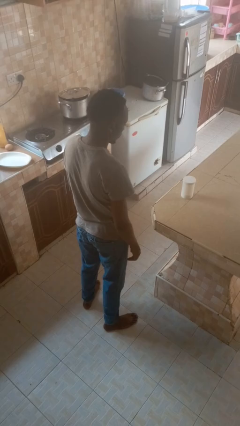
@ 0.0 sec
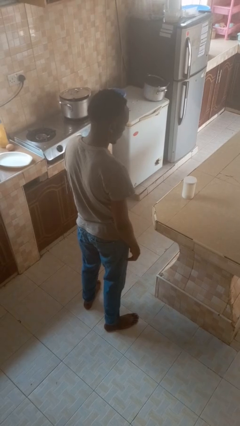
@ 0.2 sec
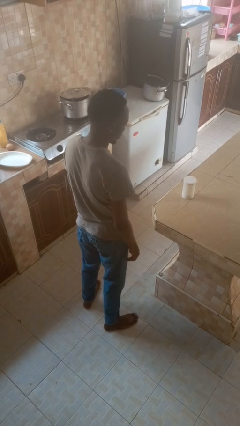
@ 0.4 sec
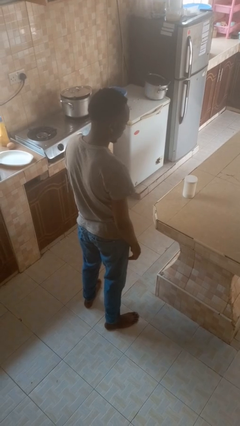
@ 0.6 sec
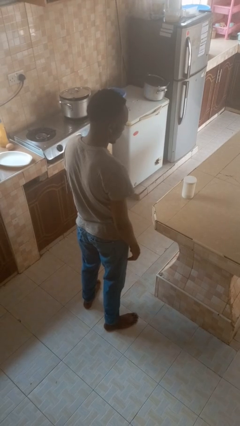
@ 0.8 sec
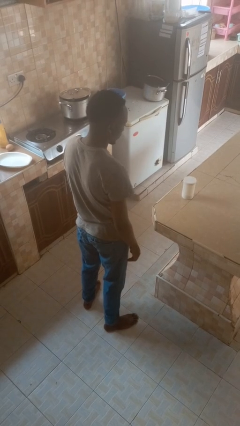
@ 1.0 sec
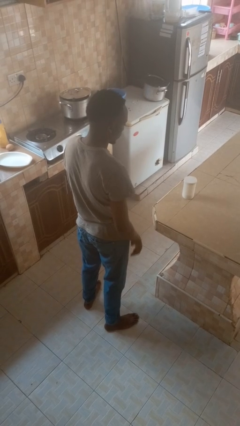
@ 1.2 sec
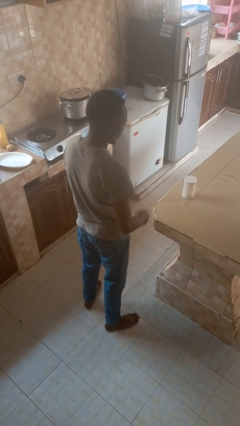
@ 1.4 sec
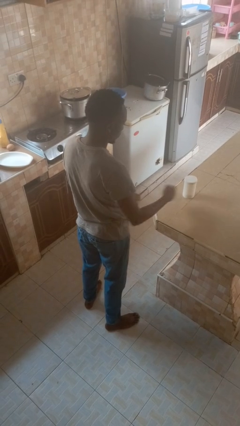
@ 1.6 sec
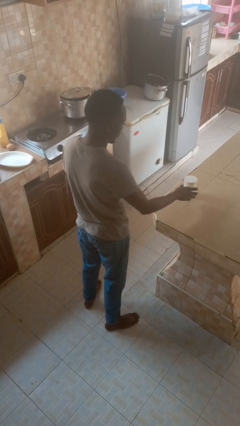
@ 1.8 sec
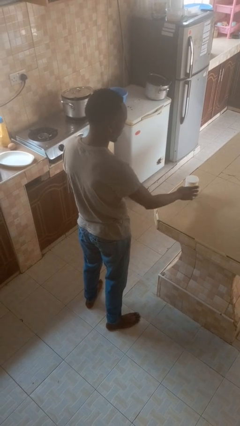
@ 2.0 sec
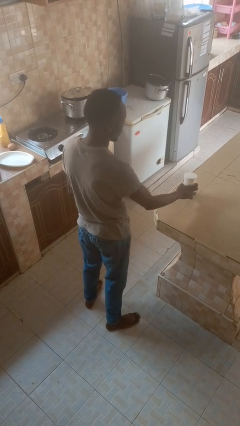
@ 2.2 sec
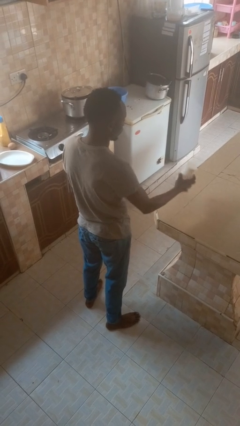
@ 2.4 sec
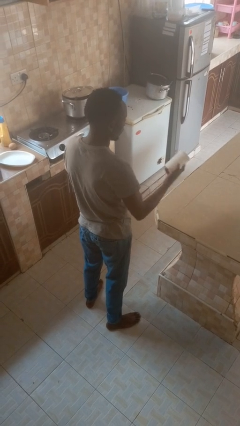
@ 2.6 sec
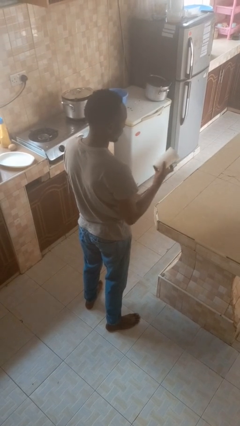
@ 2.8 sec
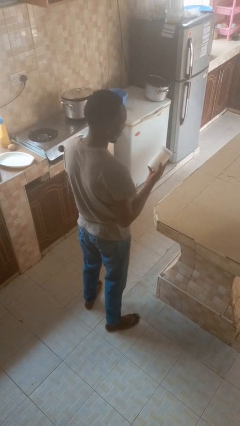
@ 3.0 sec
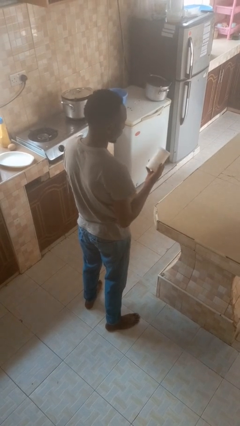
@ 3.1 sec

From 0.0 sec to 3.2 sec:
person picks up object from countertop

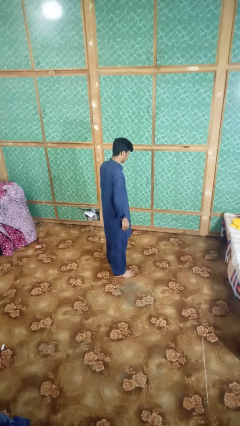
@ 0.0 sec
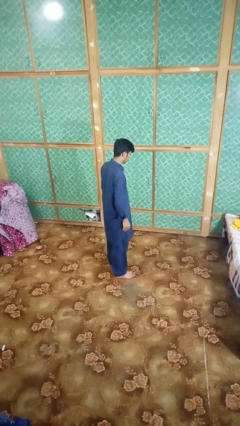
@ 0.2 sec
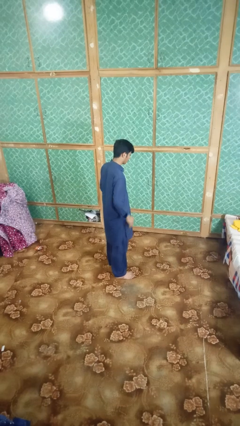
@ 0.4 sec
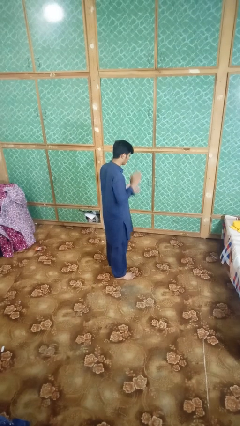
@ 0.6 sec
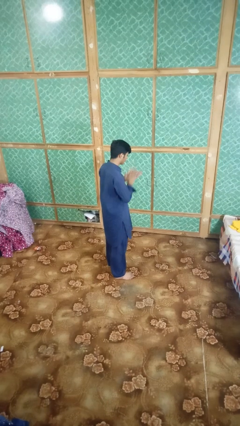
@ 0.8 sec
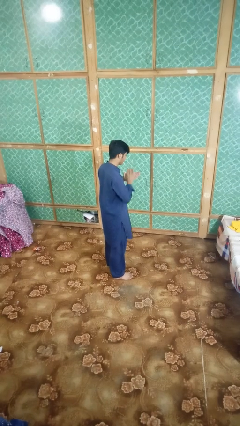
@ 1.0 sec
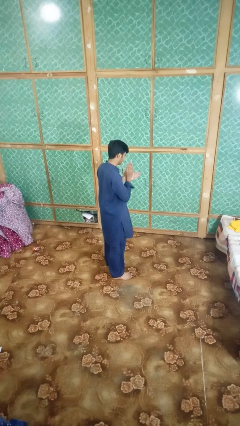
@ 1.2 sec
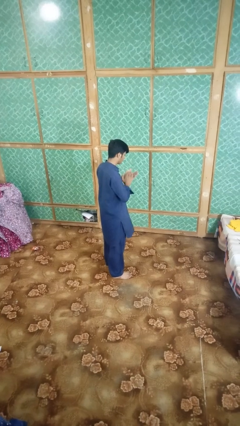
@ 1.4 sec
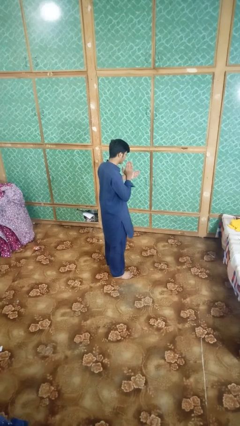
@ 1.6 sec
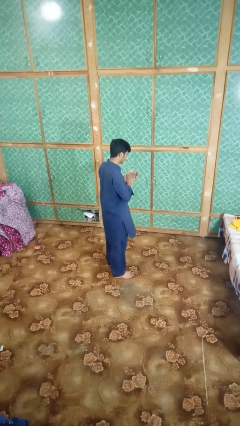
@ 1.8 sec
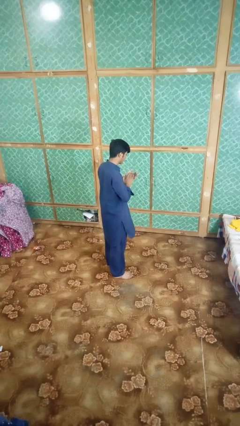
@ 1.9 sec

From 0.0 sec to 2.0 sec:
person claps hands

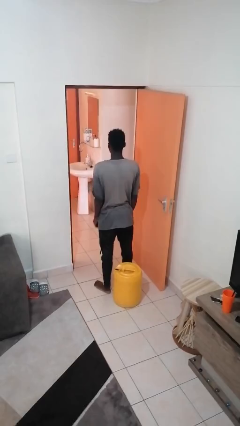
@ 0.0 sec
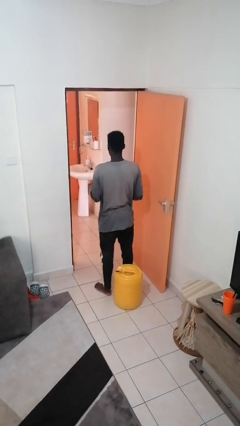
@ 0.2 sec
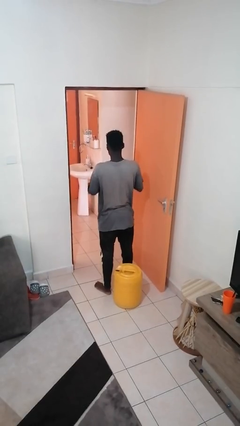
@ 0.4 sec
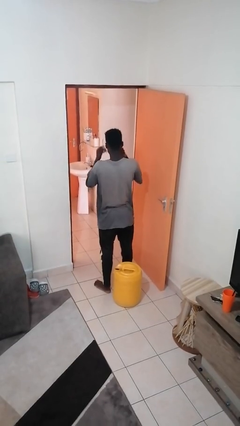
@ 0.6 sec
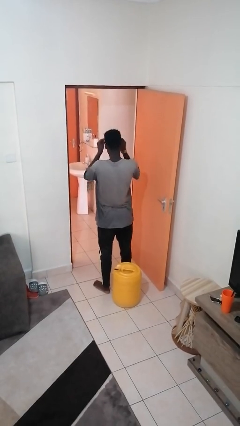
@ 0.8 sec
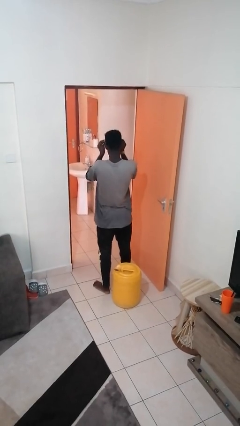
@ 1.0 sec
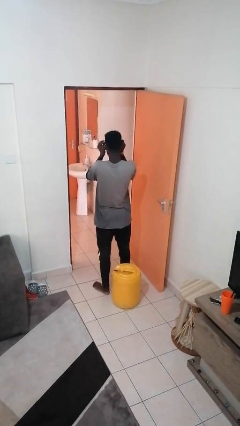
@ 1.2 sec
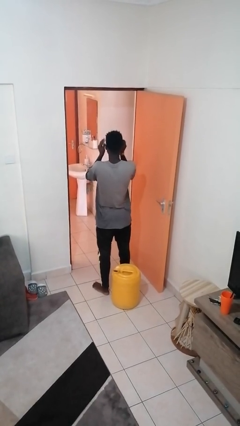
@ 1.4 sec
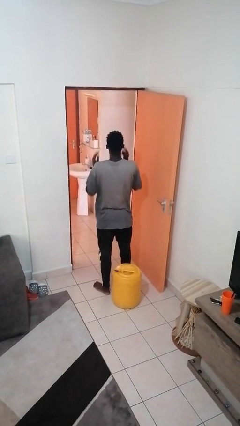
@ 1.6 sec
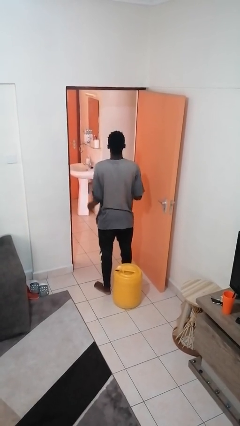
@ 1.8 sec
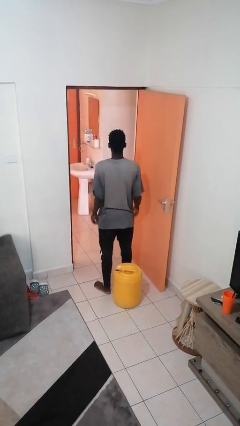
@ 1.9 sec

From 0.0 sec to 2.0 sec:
person puts on glasses

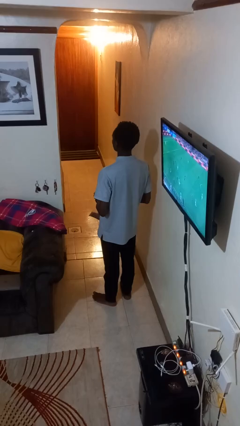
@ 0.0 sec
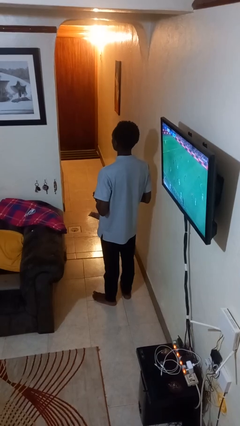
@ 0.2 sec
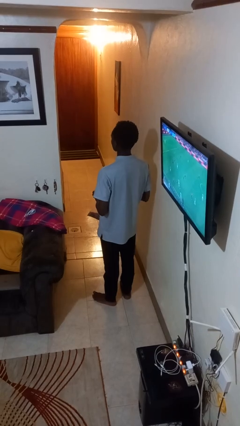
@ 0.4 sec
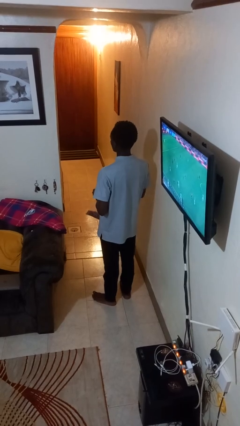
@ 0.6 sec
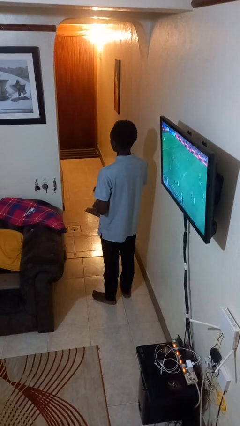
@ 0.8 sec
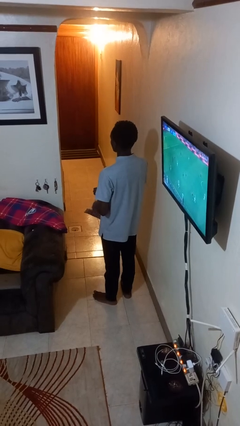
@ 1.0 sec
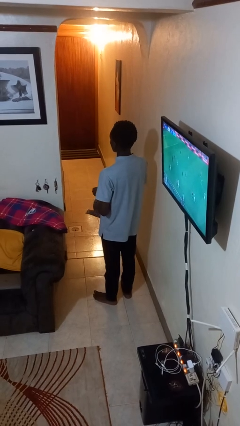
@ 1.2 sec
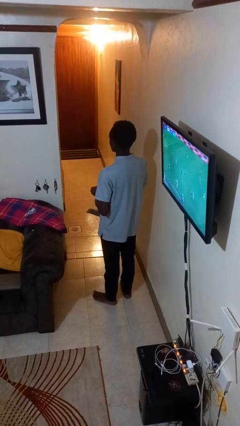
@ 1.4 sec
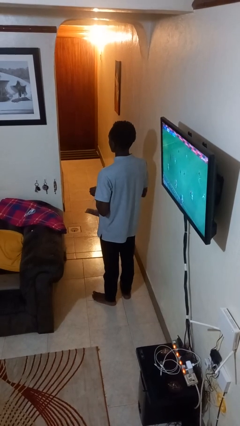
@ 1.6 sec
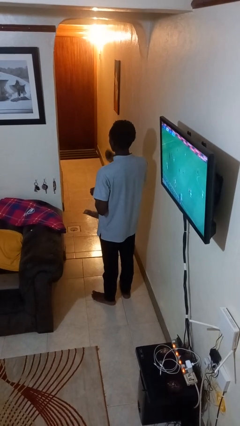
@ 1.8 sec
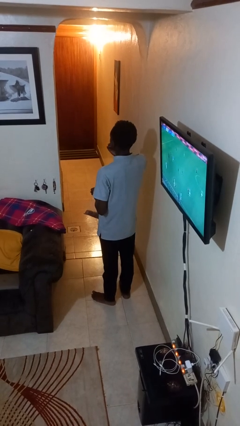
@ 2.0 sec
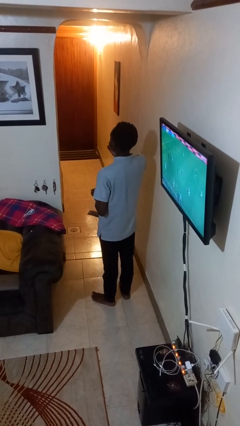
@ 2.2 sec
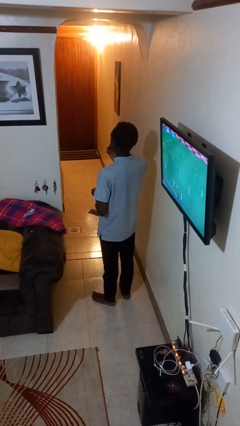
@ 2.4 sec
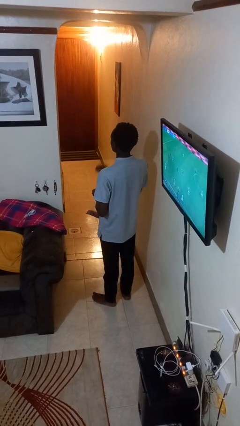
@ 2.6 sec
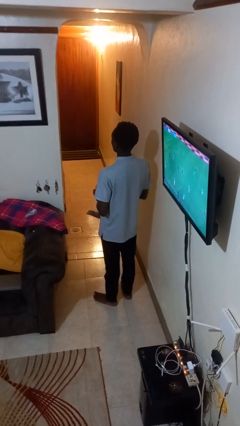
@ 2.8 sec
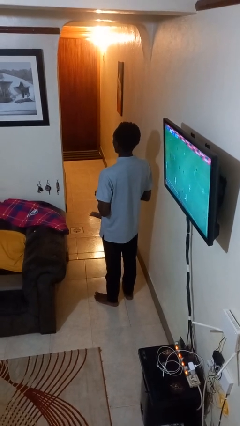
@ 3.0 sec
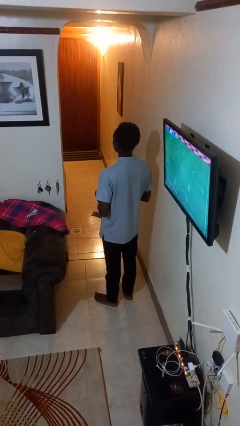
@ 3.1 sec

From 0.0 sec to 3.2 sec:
person eats snack from bag

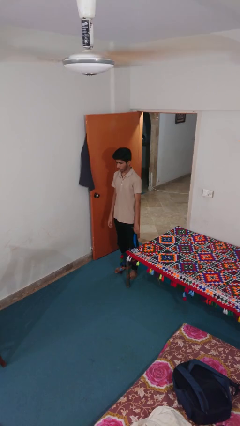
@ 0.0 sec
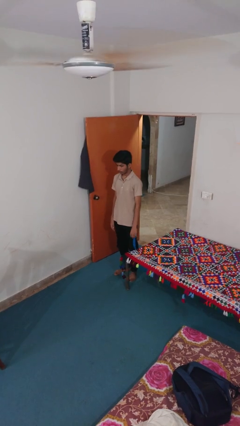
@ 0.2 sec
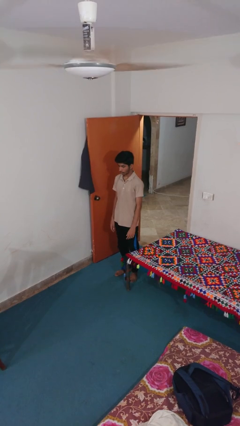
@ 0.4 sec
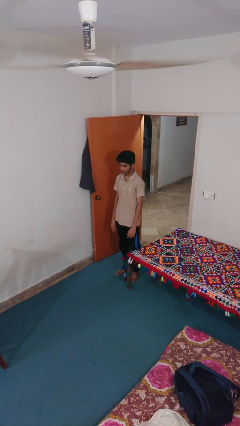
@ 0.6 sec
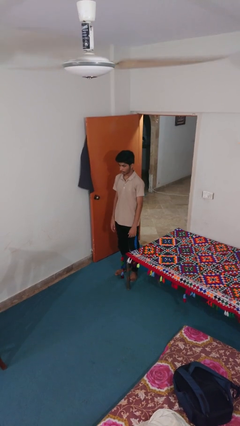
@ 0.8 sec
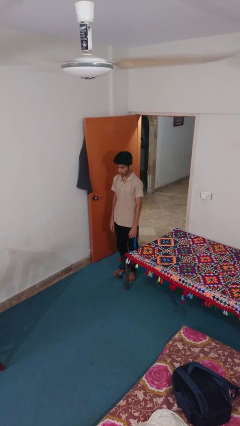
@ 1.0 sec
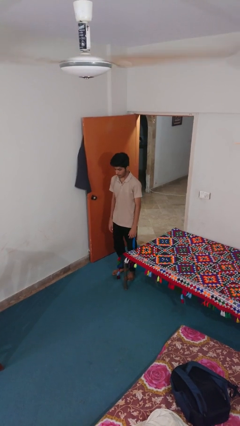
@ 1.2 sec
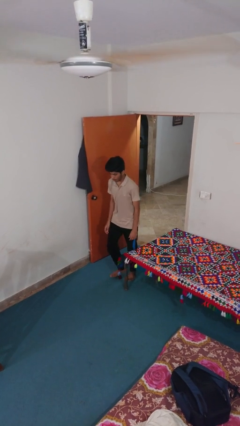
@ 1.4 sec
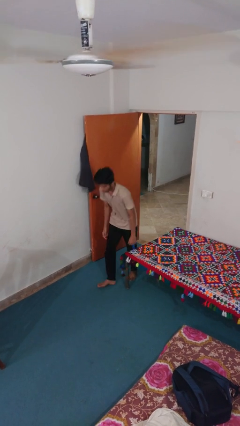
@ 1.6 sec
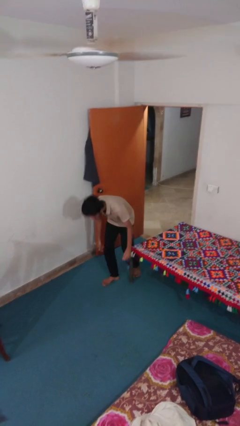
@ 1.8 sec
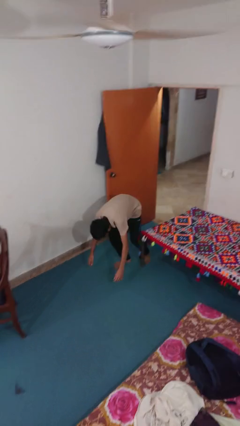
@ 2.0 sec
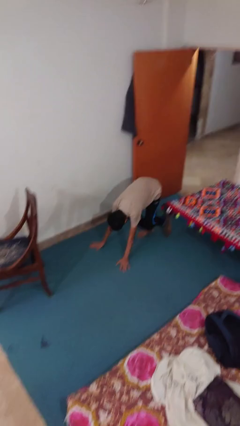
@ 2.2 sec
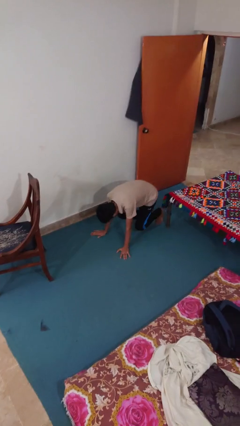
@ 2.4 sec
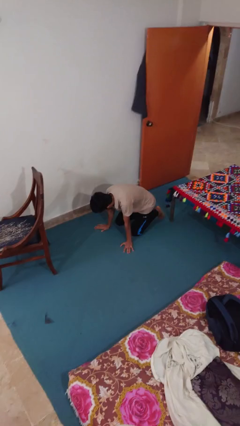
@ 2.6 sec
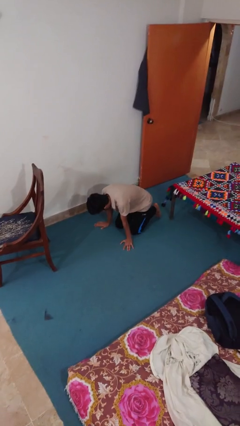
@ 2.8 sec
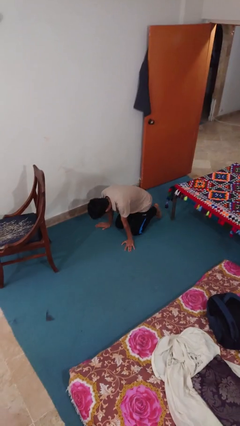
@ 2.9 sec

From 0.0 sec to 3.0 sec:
person trips on object on floor

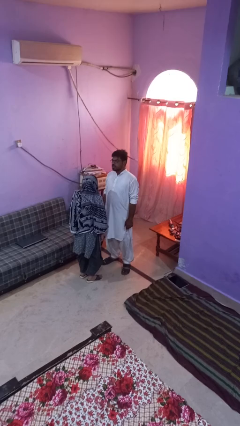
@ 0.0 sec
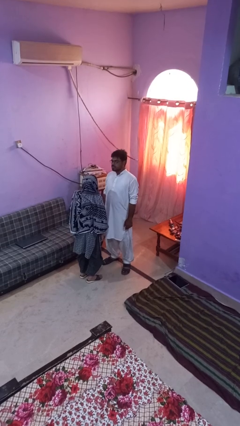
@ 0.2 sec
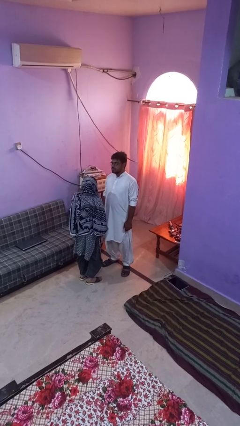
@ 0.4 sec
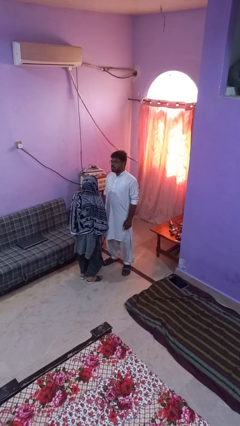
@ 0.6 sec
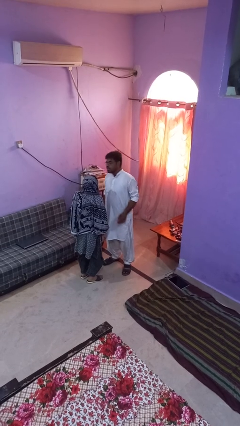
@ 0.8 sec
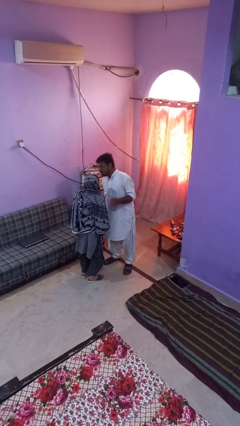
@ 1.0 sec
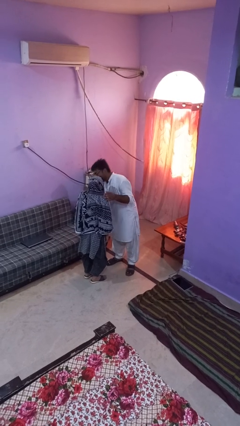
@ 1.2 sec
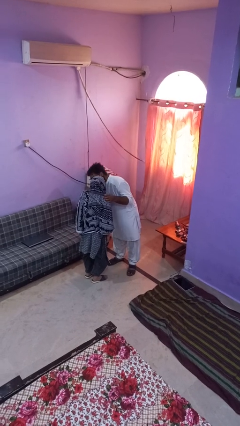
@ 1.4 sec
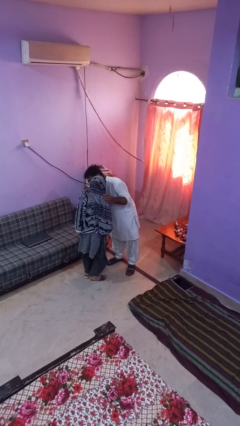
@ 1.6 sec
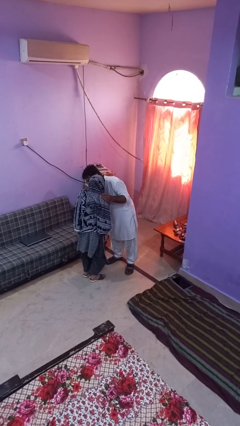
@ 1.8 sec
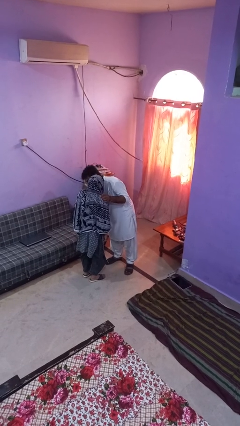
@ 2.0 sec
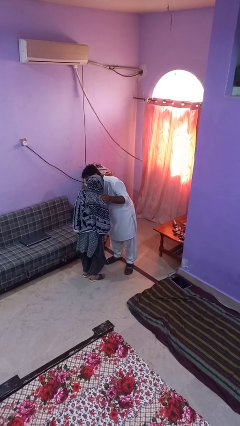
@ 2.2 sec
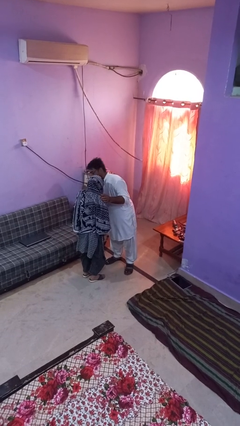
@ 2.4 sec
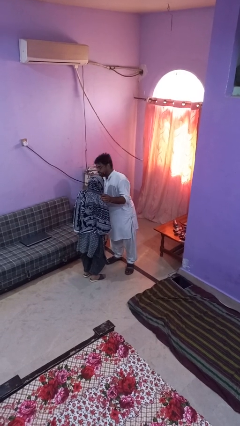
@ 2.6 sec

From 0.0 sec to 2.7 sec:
person kisses cheek of person

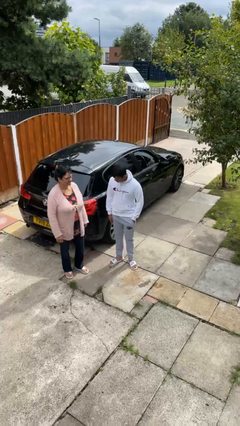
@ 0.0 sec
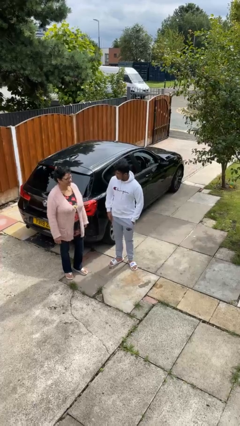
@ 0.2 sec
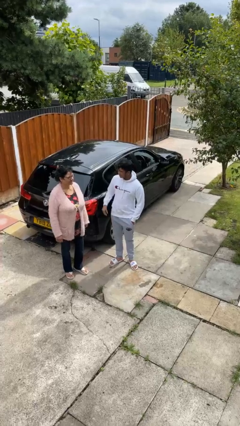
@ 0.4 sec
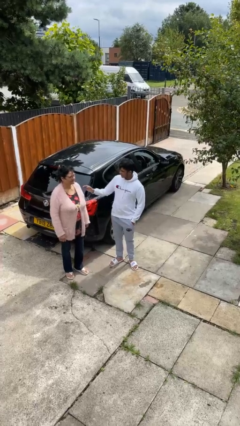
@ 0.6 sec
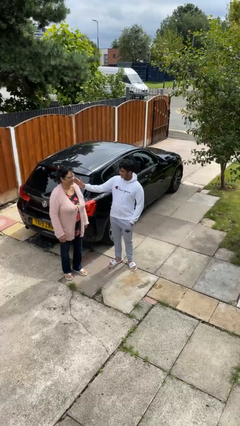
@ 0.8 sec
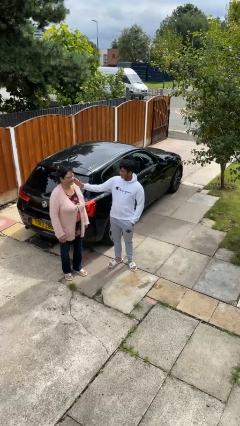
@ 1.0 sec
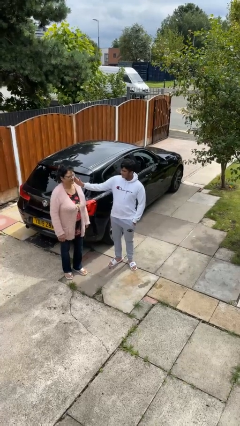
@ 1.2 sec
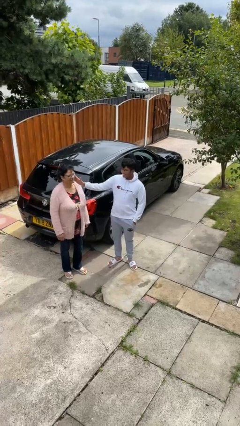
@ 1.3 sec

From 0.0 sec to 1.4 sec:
person touches face of person
